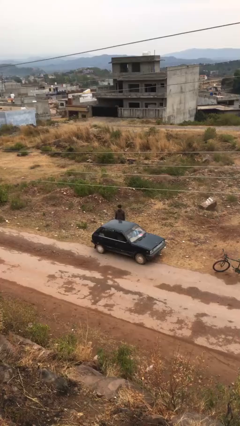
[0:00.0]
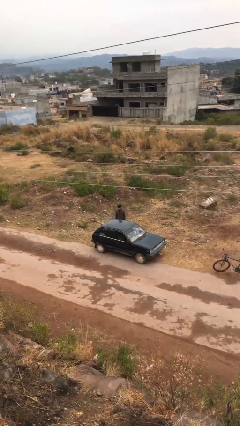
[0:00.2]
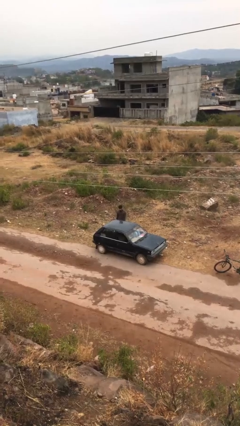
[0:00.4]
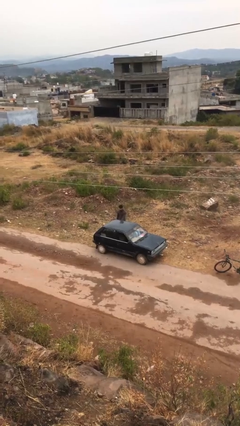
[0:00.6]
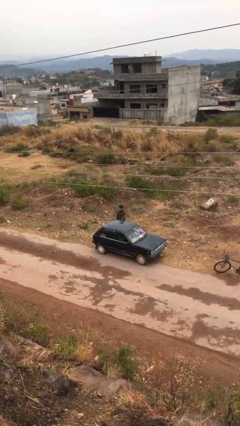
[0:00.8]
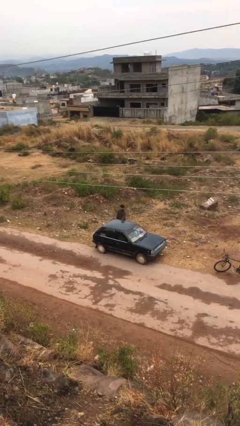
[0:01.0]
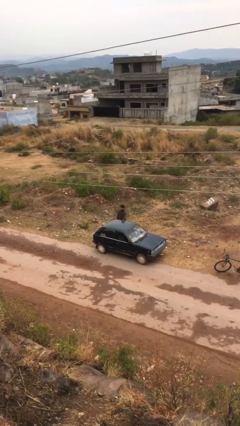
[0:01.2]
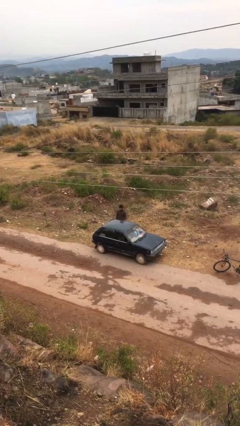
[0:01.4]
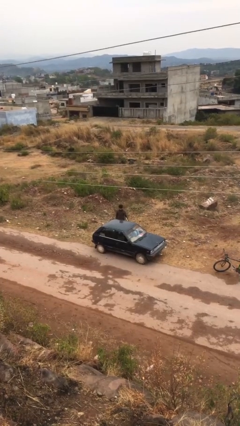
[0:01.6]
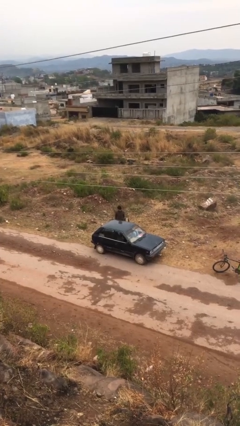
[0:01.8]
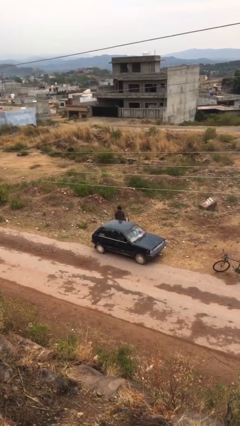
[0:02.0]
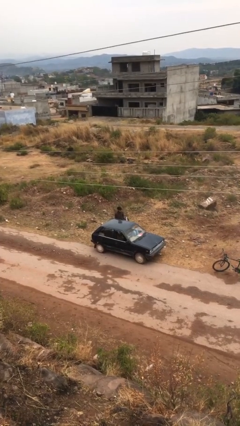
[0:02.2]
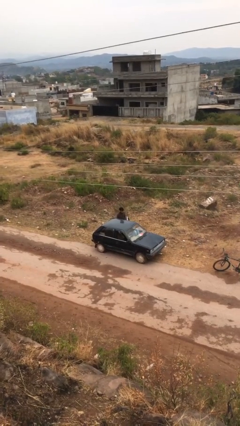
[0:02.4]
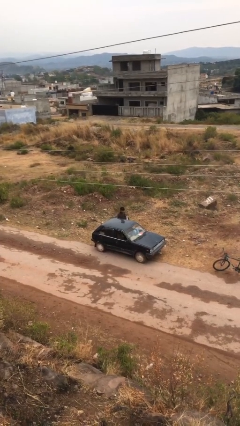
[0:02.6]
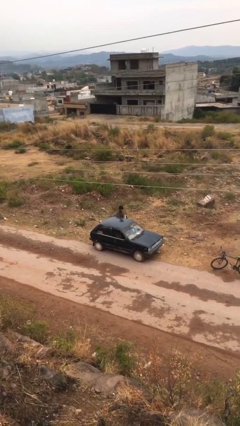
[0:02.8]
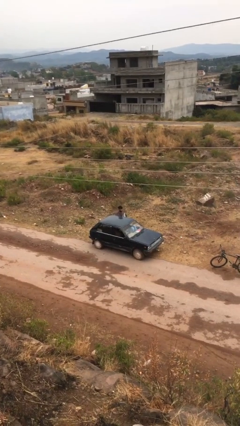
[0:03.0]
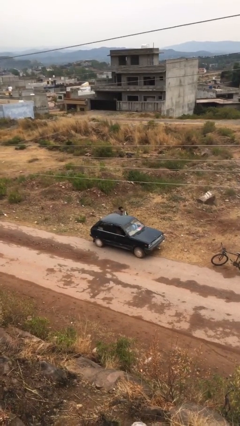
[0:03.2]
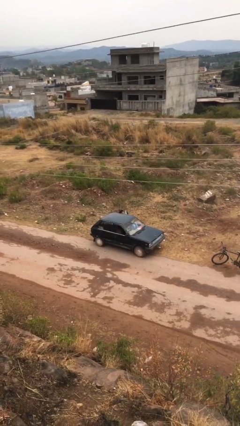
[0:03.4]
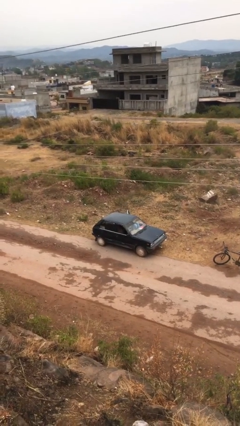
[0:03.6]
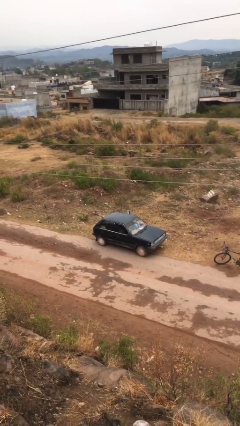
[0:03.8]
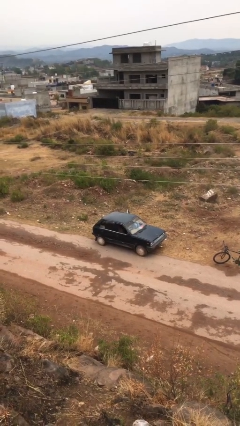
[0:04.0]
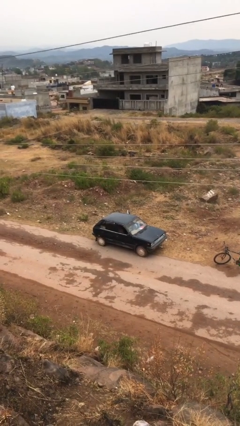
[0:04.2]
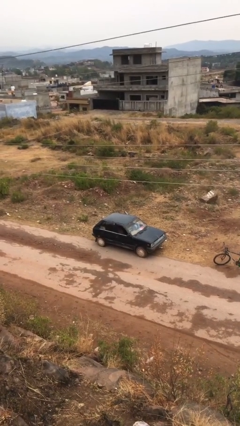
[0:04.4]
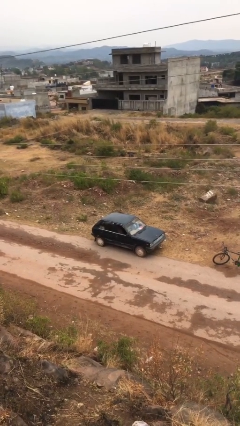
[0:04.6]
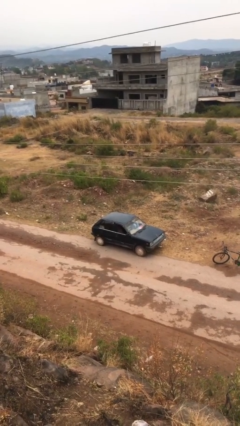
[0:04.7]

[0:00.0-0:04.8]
car picks up person

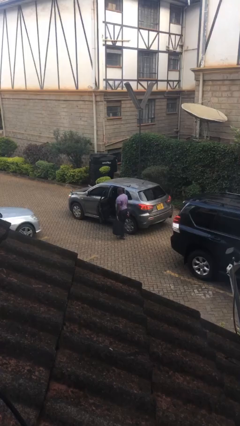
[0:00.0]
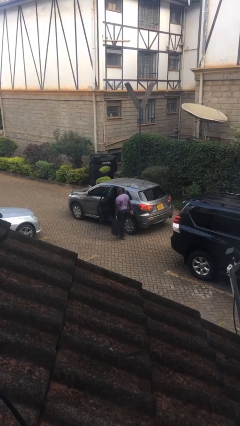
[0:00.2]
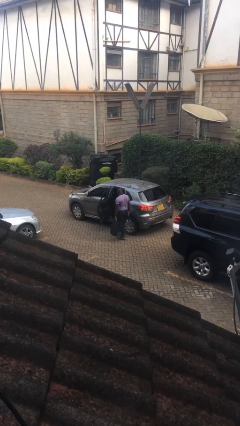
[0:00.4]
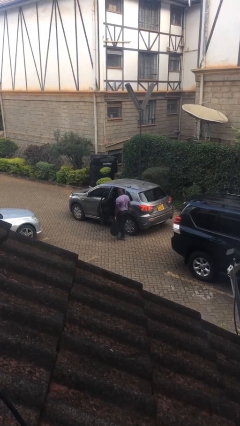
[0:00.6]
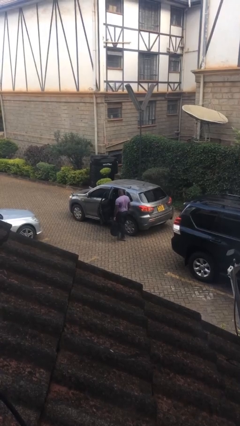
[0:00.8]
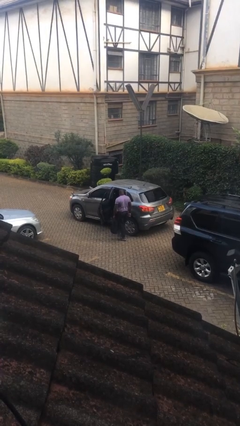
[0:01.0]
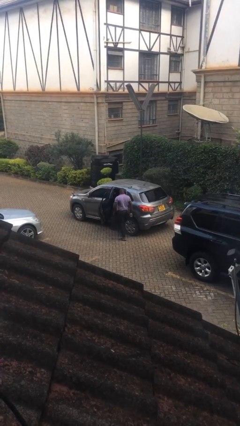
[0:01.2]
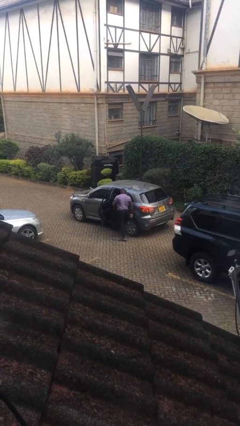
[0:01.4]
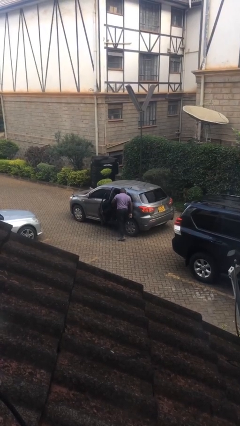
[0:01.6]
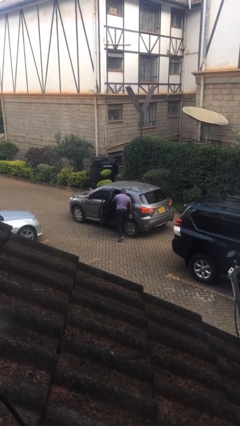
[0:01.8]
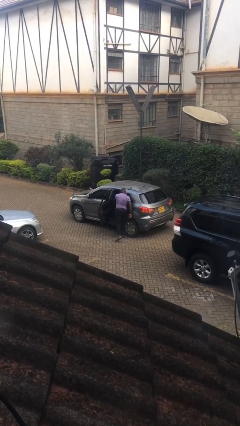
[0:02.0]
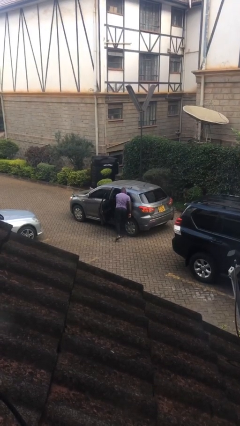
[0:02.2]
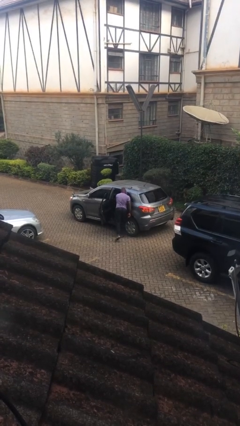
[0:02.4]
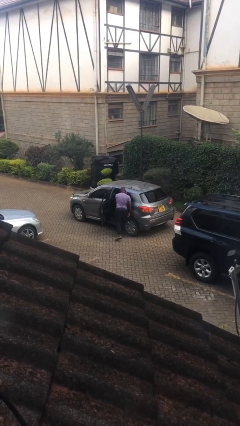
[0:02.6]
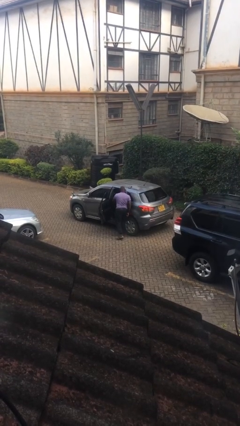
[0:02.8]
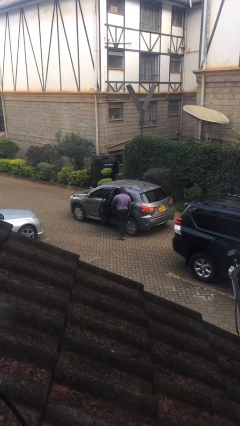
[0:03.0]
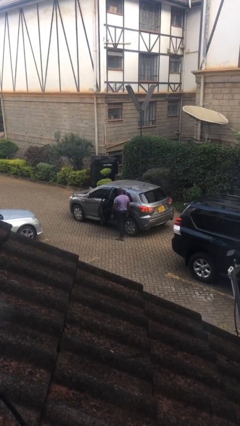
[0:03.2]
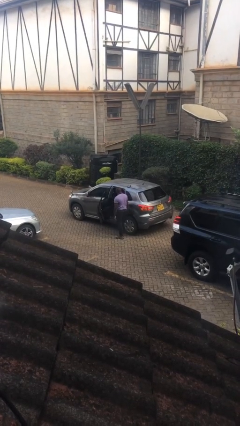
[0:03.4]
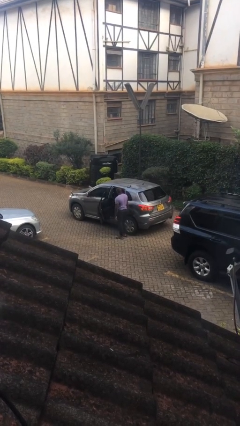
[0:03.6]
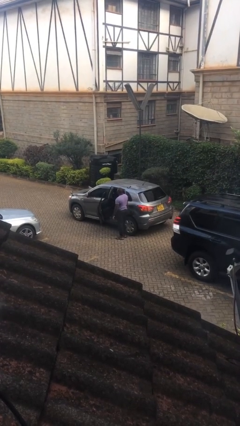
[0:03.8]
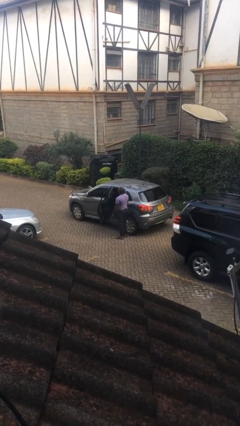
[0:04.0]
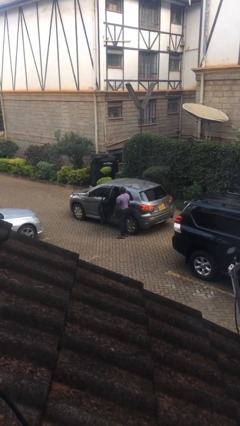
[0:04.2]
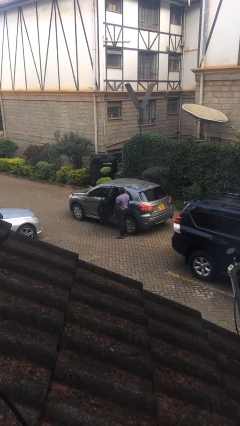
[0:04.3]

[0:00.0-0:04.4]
person loads car

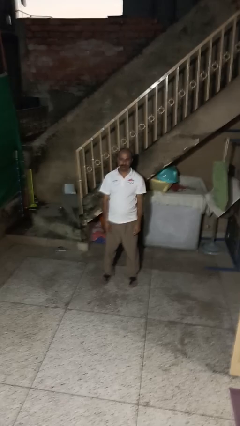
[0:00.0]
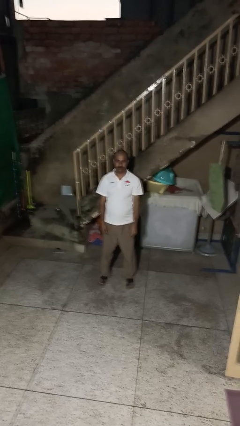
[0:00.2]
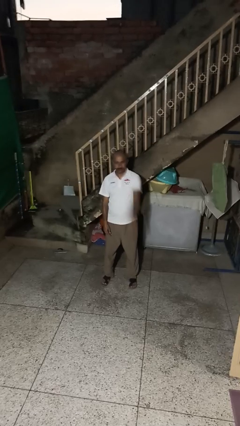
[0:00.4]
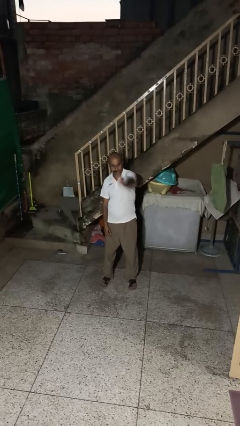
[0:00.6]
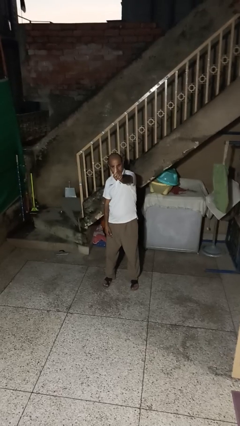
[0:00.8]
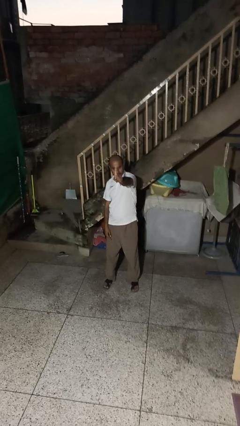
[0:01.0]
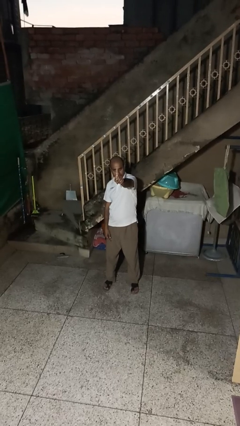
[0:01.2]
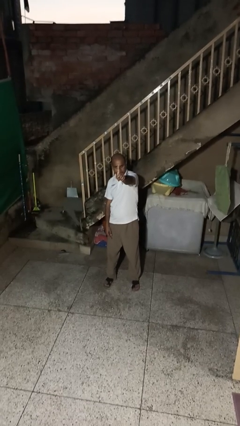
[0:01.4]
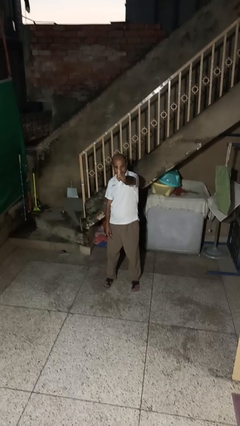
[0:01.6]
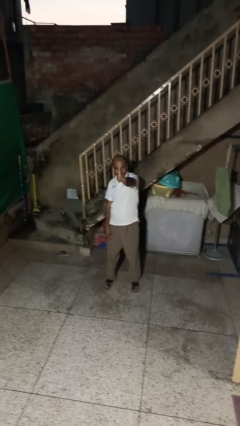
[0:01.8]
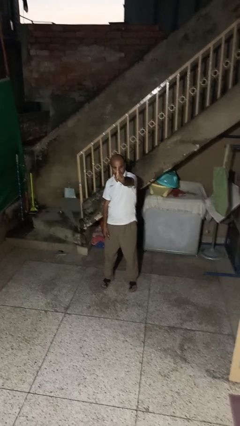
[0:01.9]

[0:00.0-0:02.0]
person gestures number one

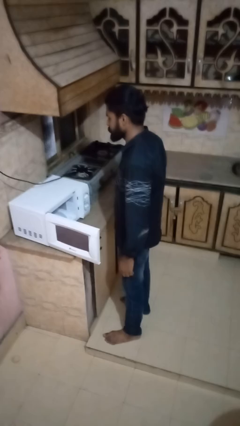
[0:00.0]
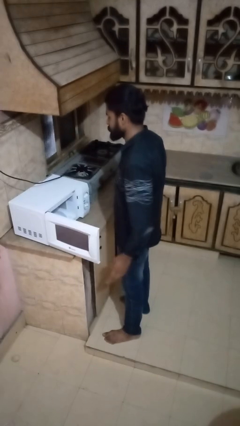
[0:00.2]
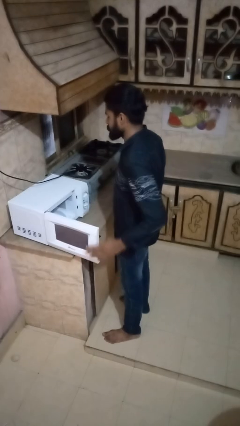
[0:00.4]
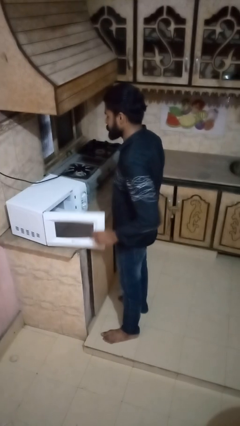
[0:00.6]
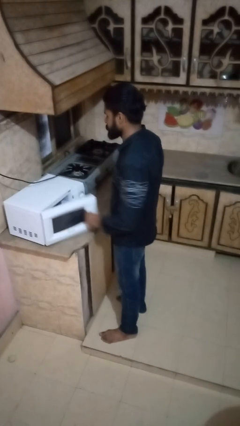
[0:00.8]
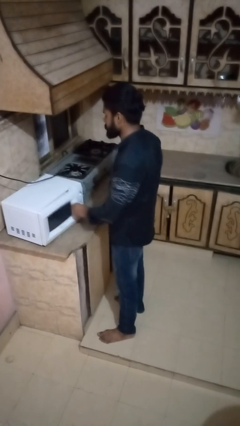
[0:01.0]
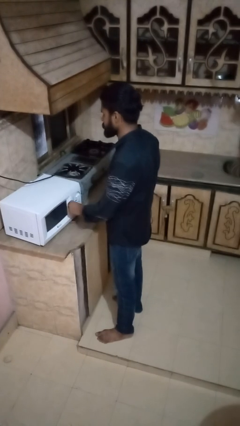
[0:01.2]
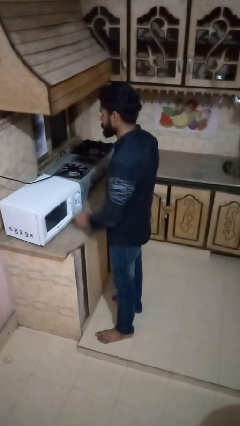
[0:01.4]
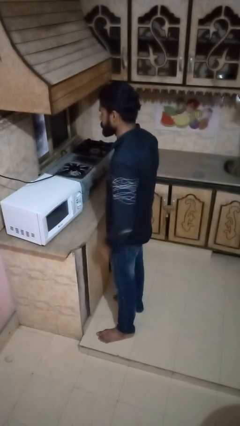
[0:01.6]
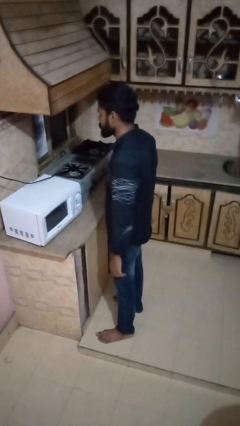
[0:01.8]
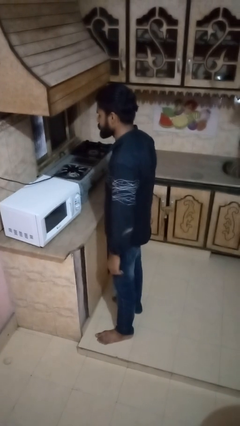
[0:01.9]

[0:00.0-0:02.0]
person closes oven door

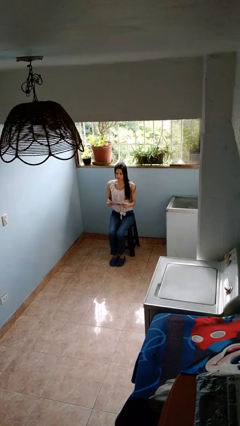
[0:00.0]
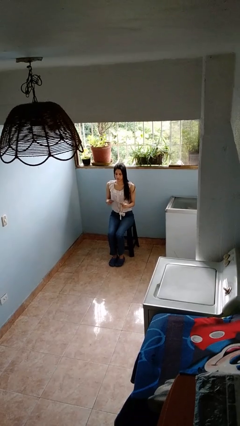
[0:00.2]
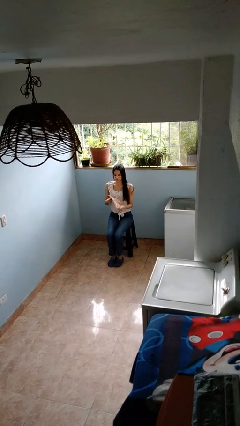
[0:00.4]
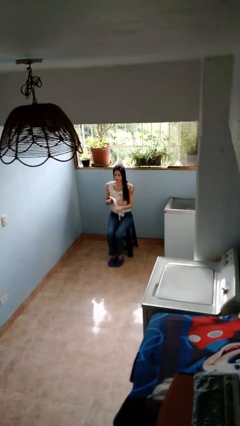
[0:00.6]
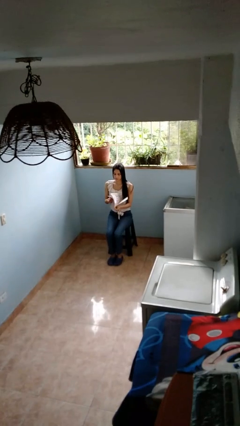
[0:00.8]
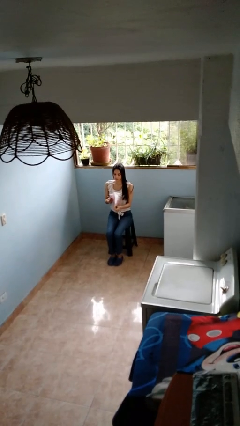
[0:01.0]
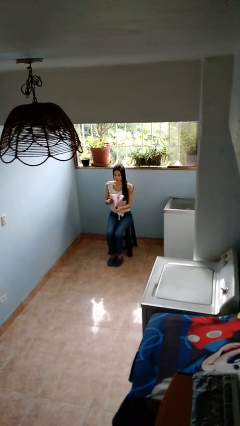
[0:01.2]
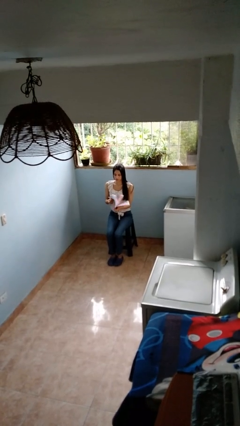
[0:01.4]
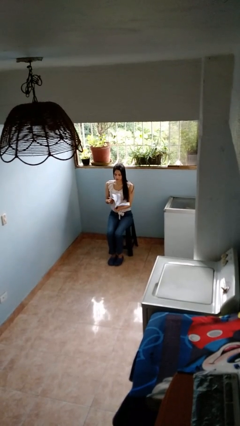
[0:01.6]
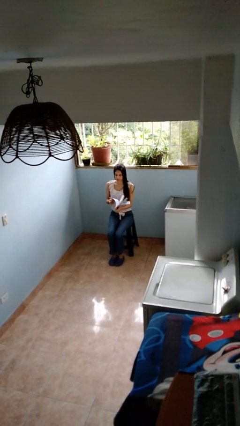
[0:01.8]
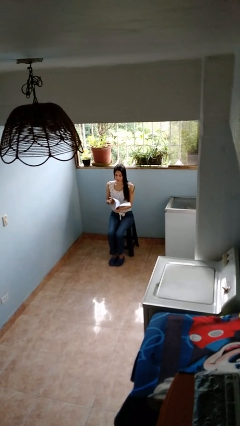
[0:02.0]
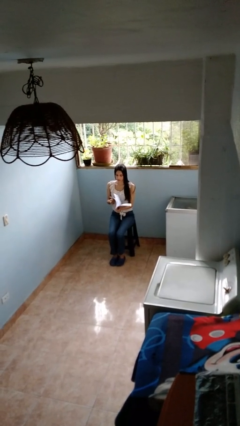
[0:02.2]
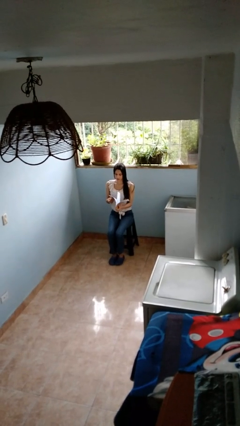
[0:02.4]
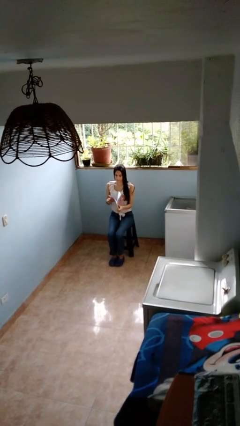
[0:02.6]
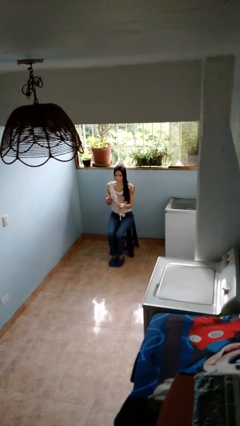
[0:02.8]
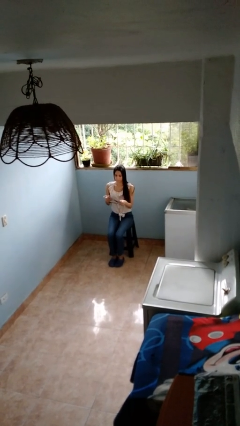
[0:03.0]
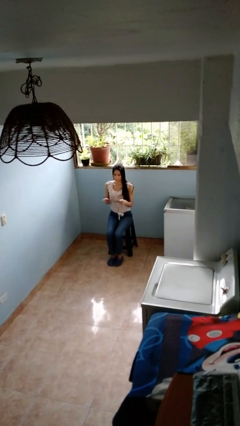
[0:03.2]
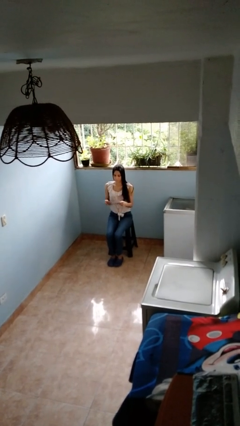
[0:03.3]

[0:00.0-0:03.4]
person reads magazine

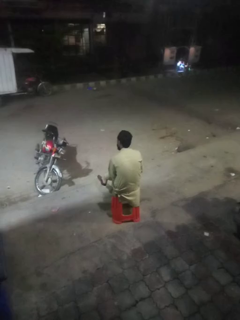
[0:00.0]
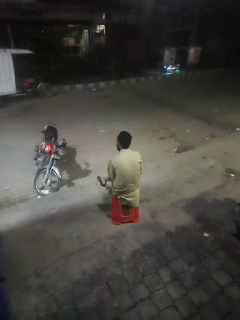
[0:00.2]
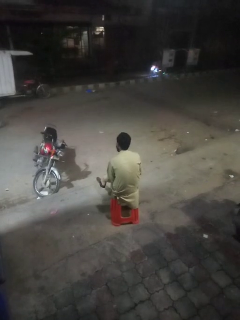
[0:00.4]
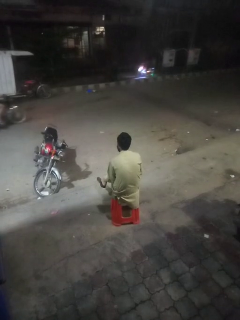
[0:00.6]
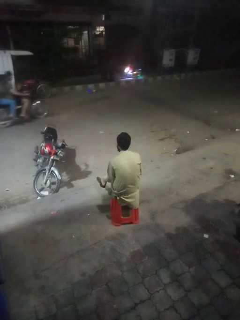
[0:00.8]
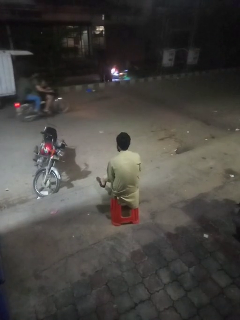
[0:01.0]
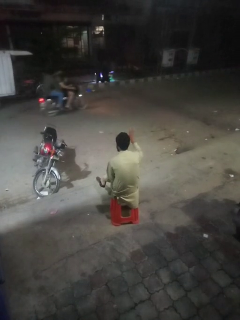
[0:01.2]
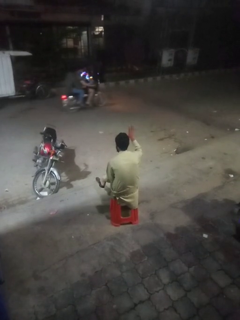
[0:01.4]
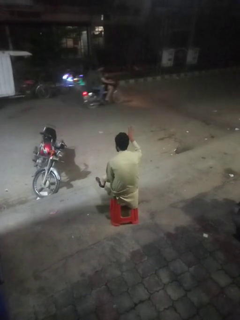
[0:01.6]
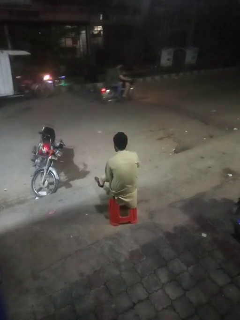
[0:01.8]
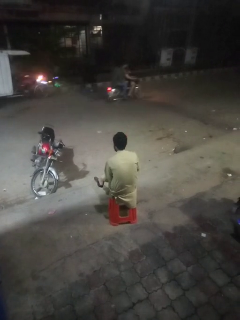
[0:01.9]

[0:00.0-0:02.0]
person gestures number five
